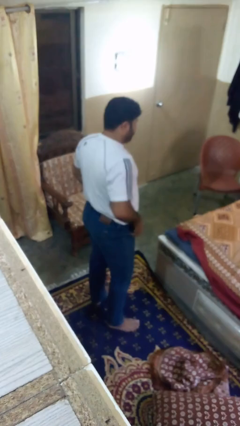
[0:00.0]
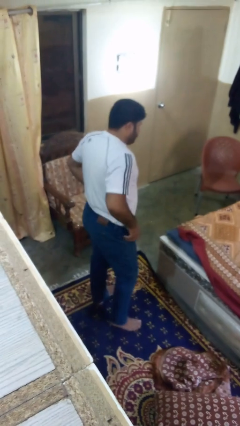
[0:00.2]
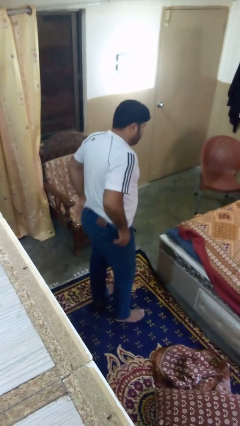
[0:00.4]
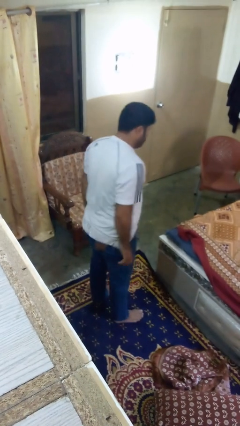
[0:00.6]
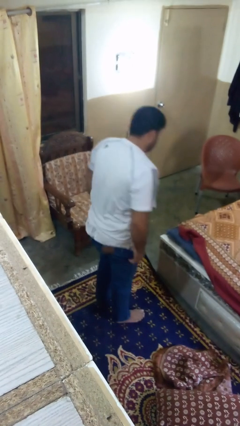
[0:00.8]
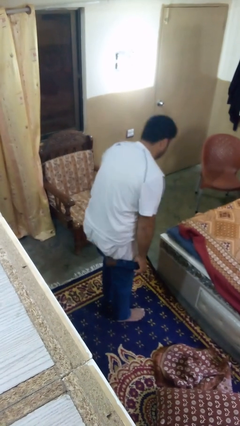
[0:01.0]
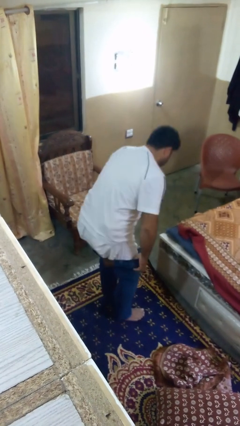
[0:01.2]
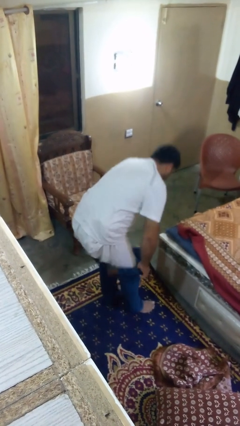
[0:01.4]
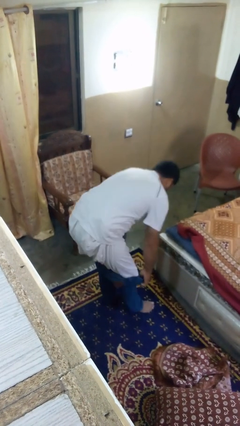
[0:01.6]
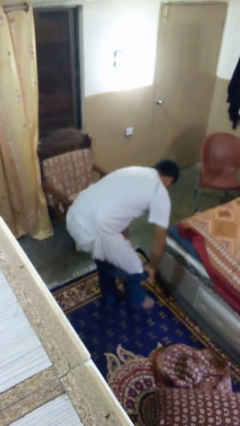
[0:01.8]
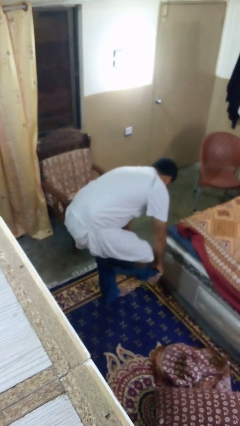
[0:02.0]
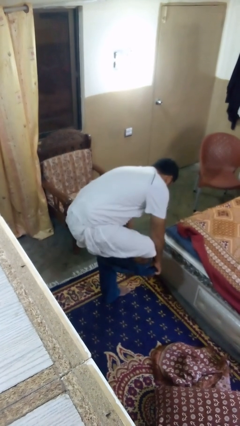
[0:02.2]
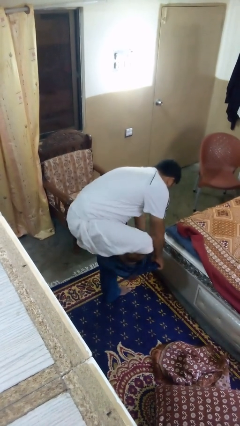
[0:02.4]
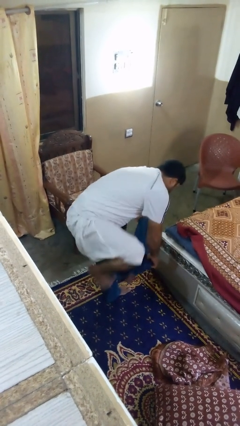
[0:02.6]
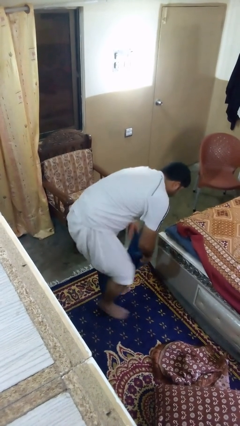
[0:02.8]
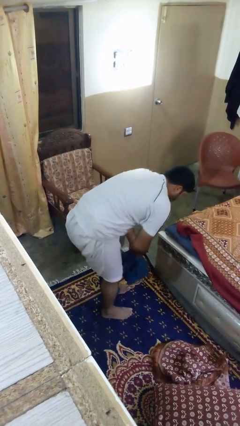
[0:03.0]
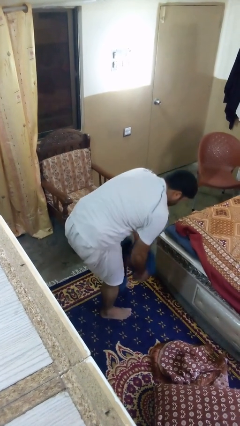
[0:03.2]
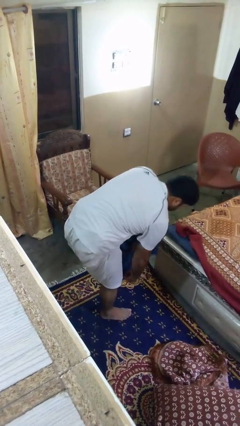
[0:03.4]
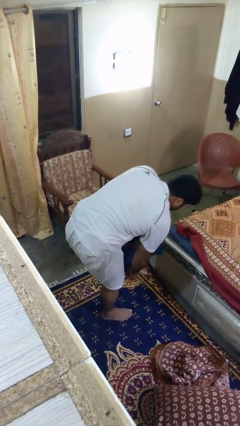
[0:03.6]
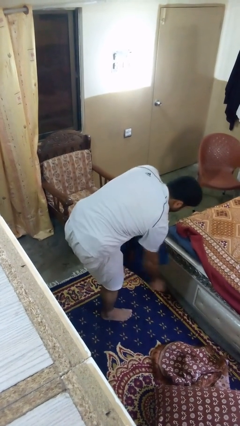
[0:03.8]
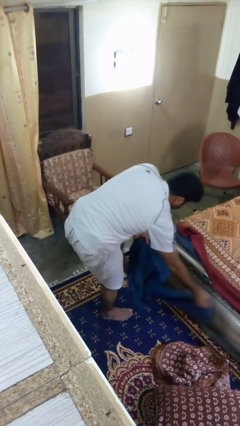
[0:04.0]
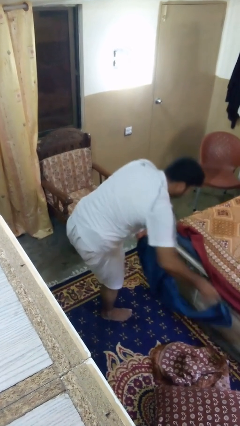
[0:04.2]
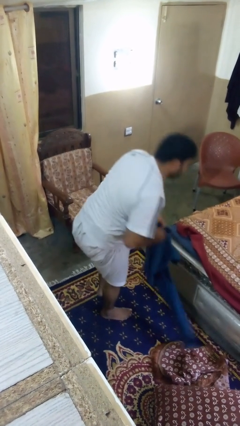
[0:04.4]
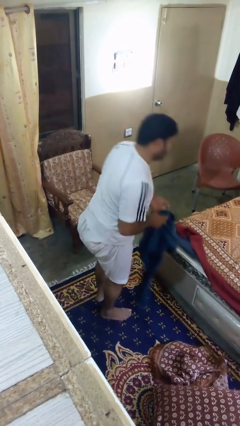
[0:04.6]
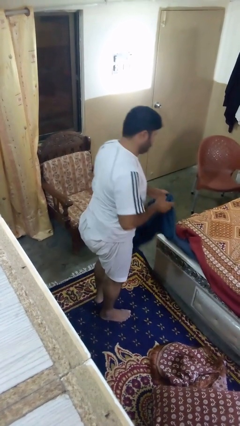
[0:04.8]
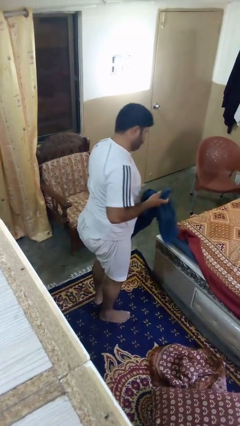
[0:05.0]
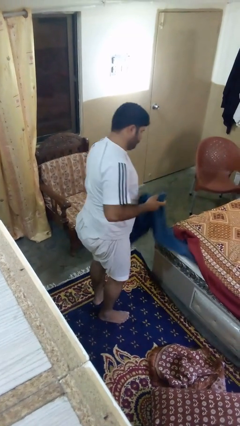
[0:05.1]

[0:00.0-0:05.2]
person takes off pants

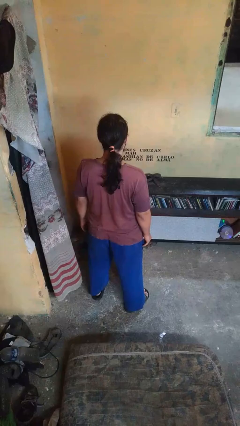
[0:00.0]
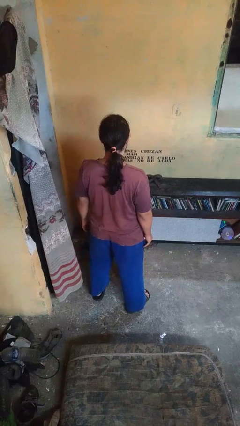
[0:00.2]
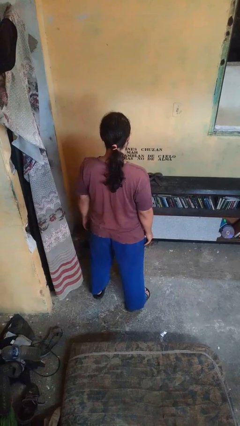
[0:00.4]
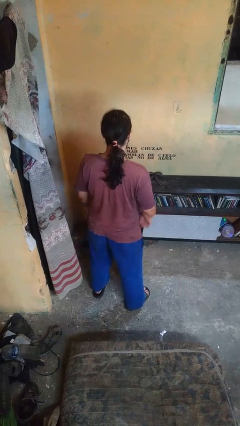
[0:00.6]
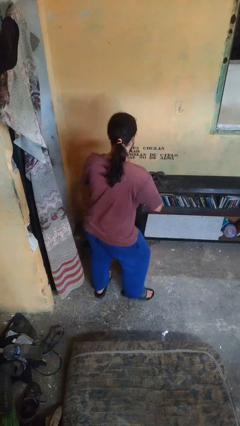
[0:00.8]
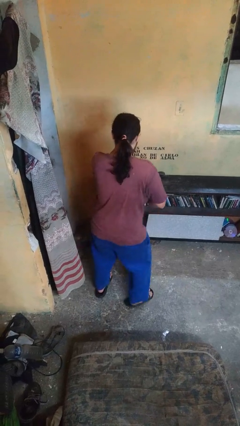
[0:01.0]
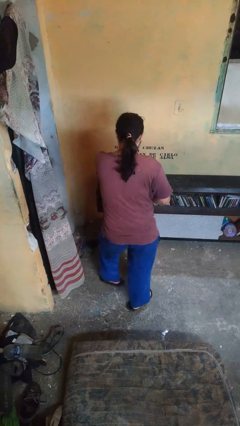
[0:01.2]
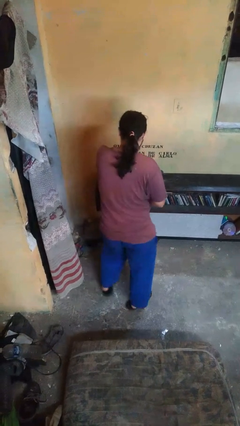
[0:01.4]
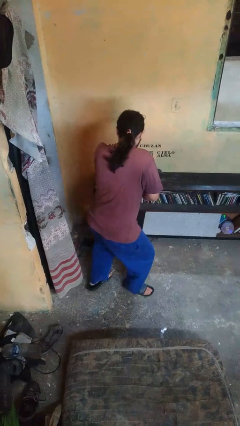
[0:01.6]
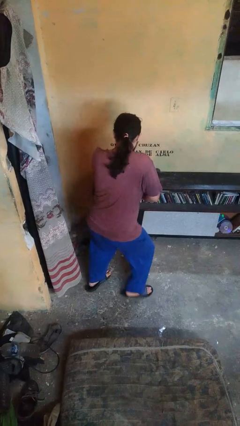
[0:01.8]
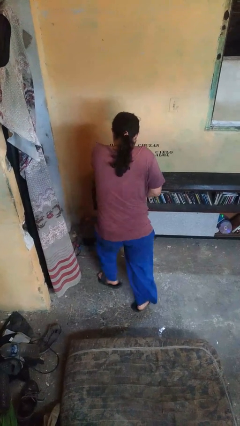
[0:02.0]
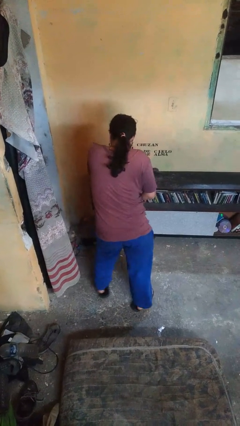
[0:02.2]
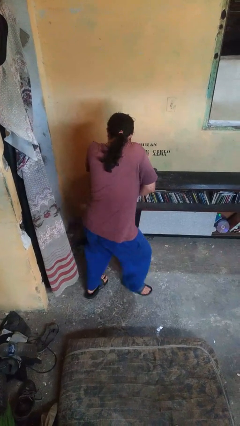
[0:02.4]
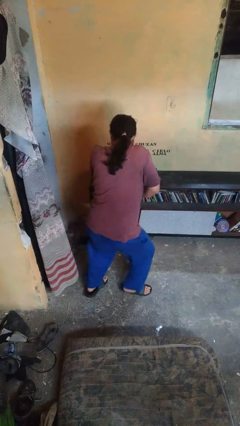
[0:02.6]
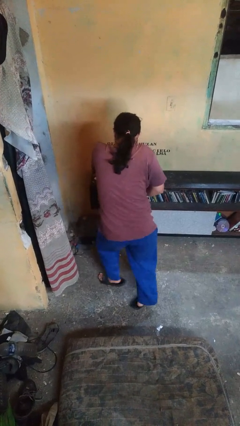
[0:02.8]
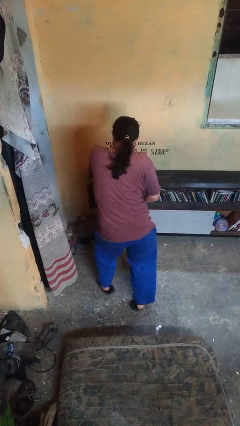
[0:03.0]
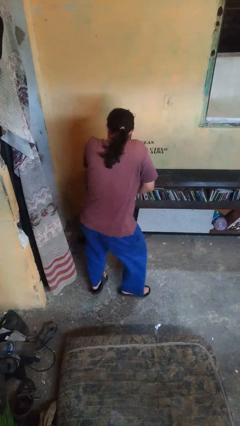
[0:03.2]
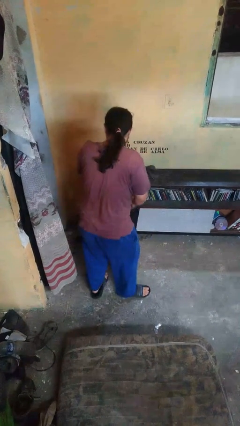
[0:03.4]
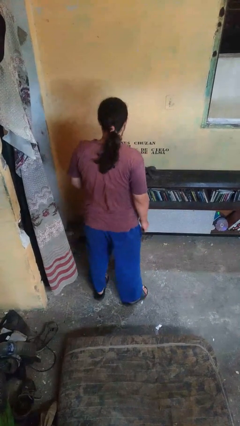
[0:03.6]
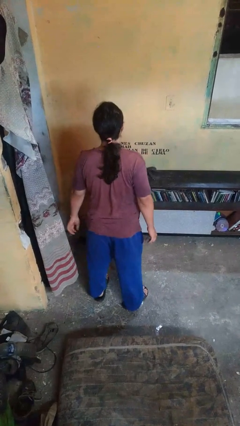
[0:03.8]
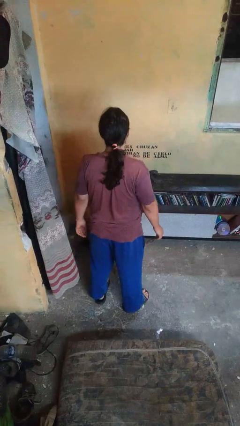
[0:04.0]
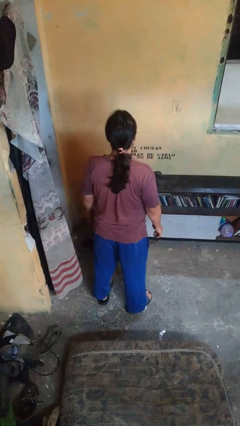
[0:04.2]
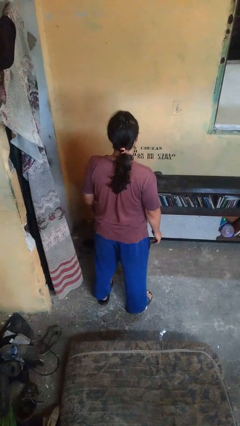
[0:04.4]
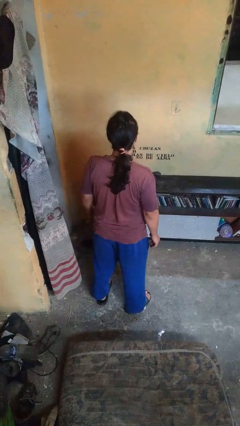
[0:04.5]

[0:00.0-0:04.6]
person dances in place

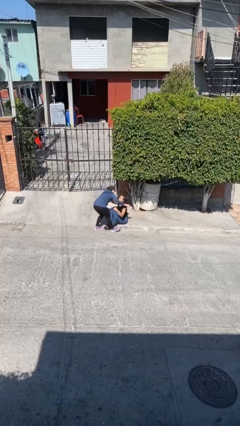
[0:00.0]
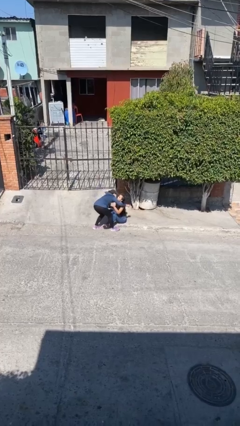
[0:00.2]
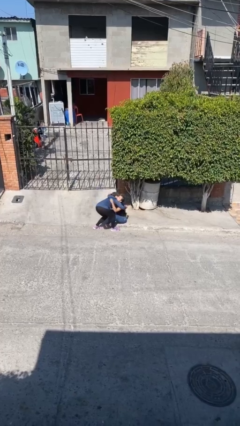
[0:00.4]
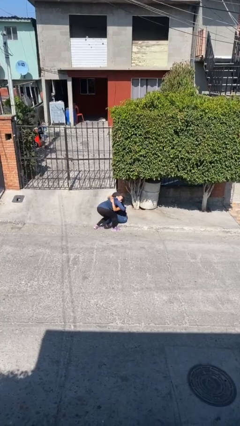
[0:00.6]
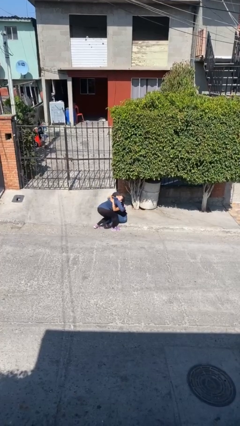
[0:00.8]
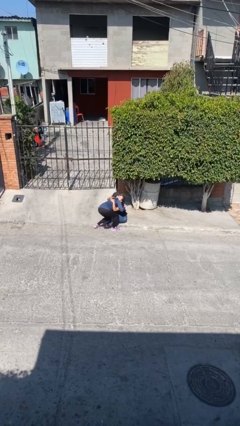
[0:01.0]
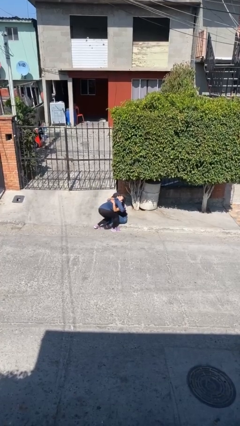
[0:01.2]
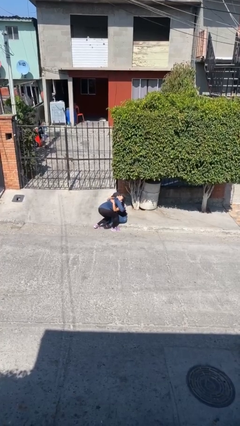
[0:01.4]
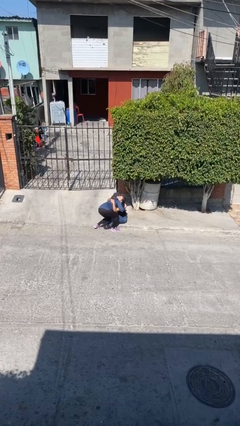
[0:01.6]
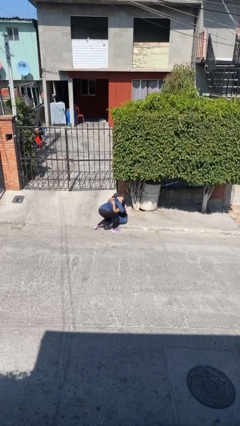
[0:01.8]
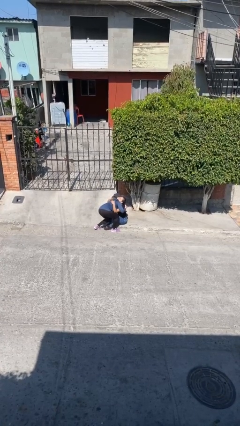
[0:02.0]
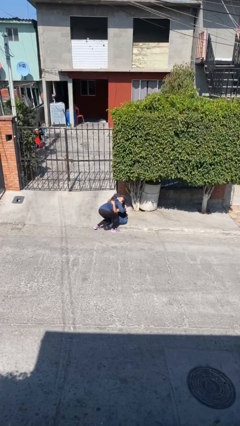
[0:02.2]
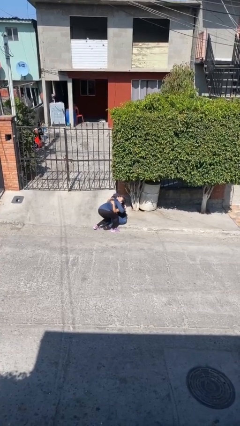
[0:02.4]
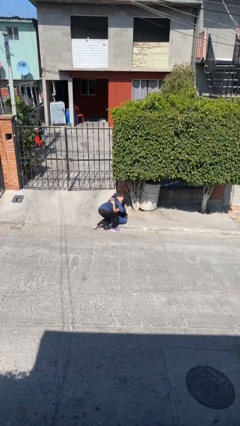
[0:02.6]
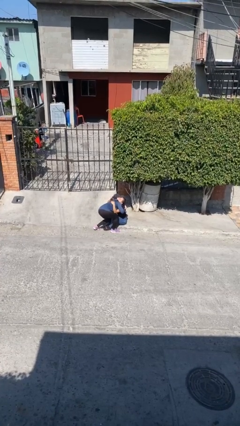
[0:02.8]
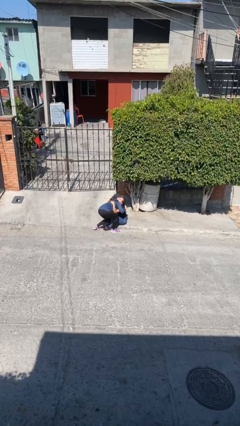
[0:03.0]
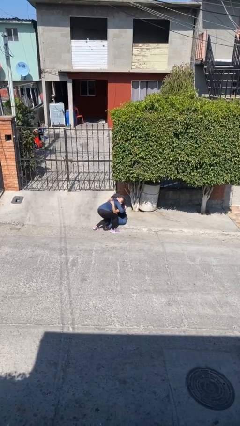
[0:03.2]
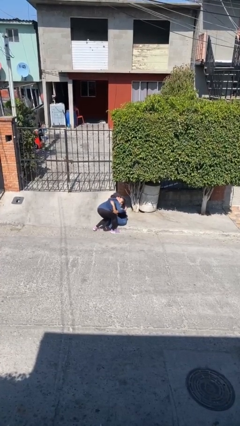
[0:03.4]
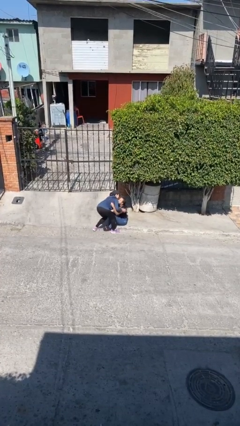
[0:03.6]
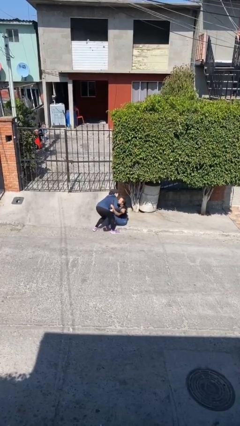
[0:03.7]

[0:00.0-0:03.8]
person embraces person

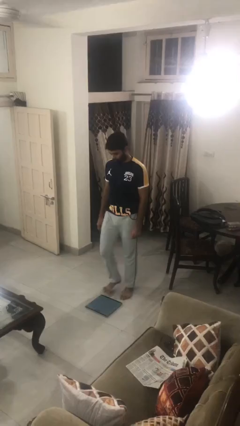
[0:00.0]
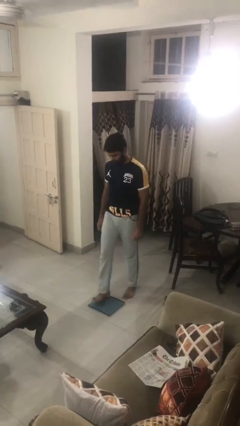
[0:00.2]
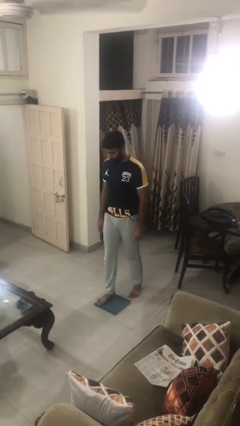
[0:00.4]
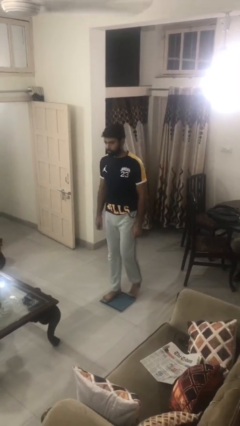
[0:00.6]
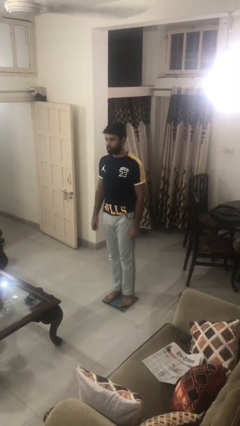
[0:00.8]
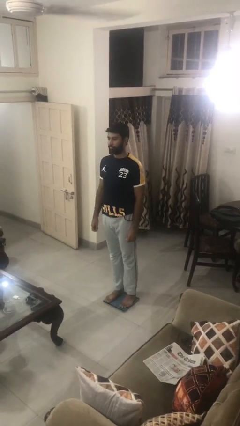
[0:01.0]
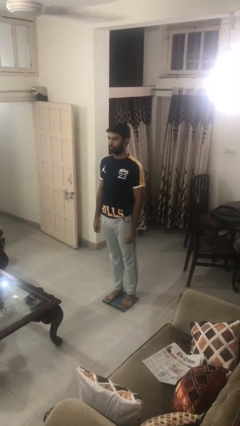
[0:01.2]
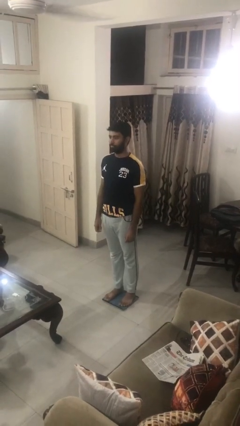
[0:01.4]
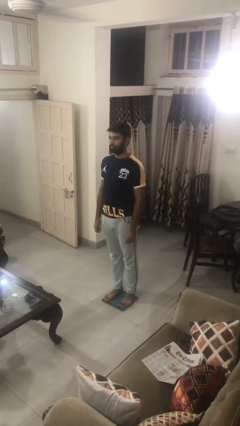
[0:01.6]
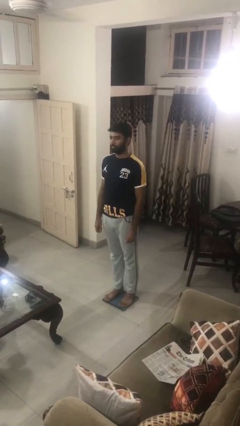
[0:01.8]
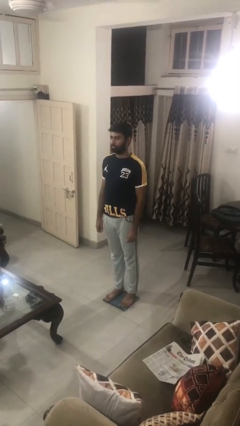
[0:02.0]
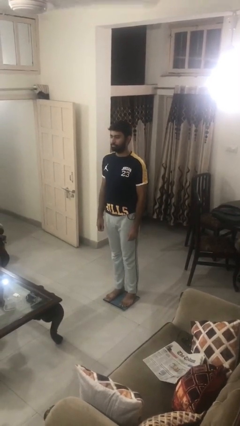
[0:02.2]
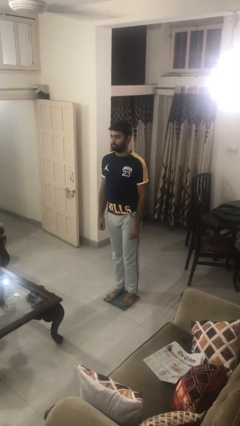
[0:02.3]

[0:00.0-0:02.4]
person uses bodyweight scale

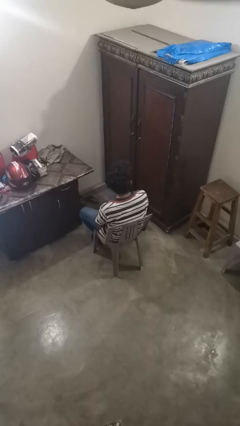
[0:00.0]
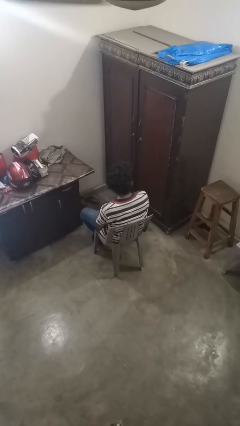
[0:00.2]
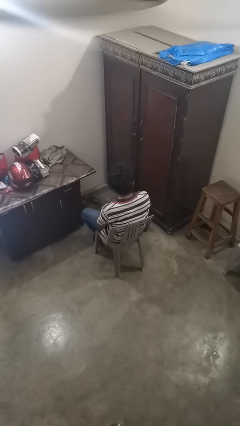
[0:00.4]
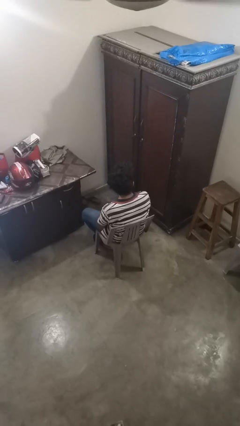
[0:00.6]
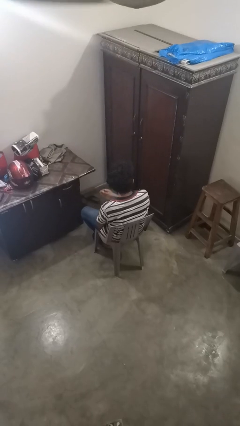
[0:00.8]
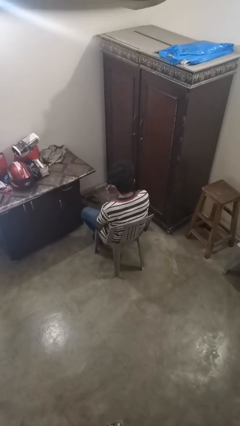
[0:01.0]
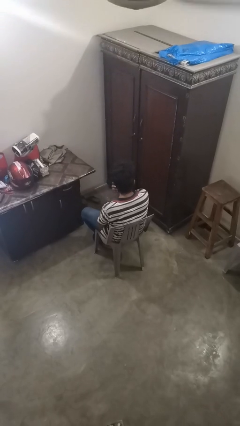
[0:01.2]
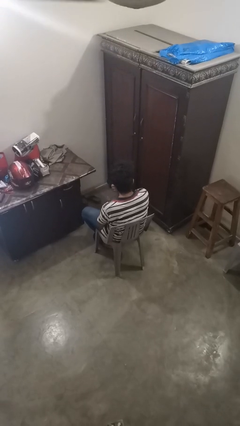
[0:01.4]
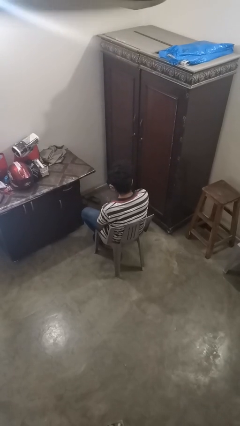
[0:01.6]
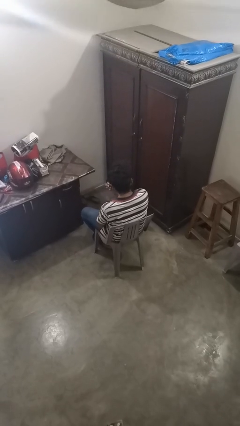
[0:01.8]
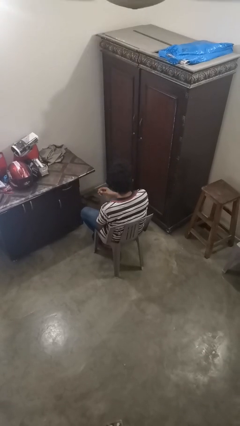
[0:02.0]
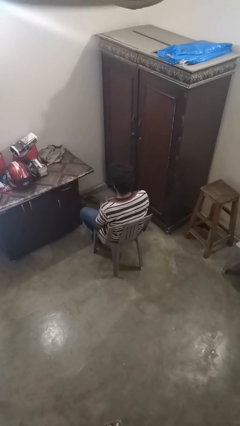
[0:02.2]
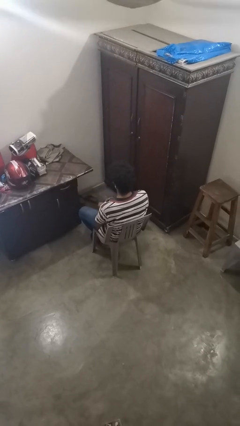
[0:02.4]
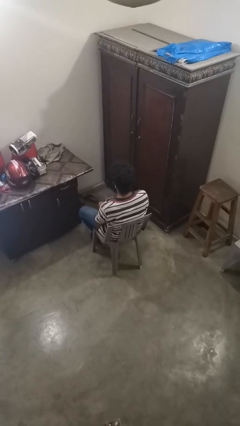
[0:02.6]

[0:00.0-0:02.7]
person takes off earrings
